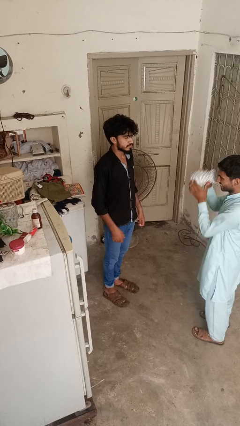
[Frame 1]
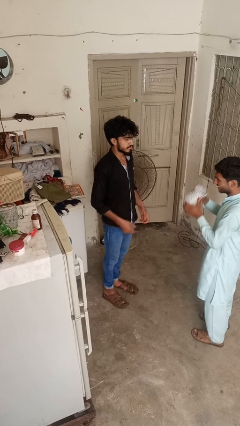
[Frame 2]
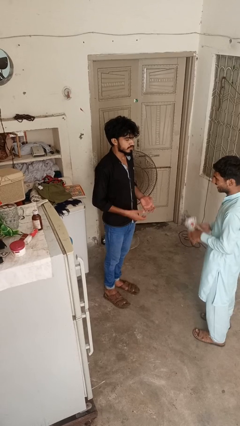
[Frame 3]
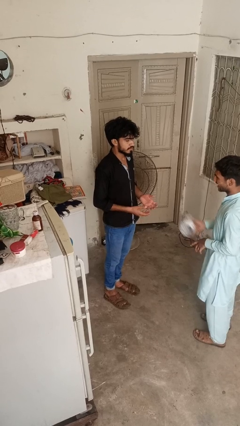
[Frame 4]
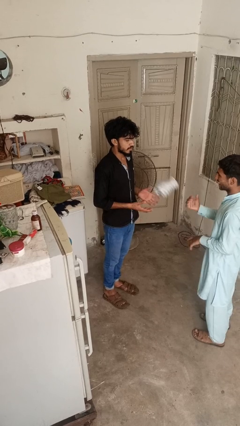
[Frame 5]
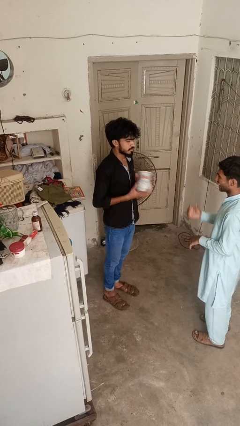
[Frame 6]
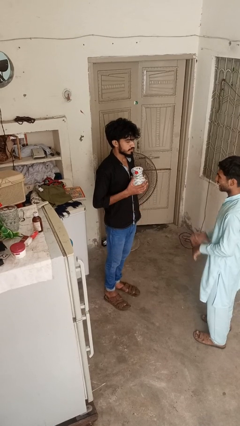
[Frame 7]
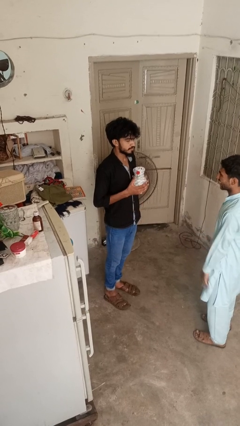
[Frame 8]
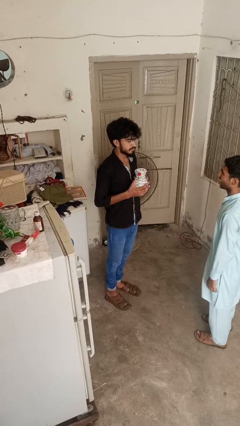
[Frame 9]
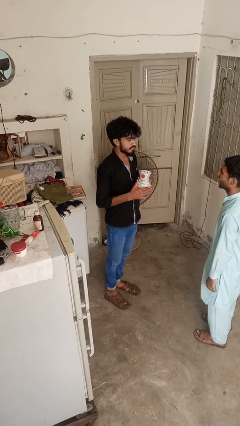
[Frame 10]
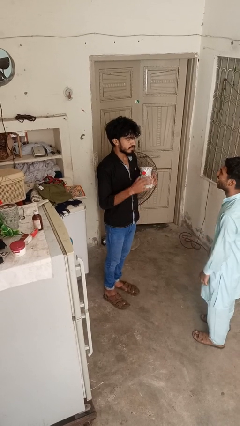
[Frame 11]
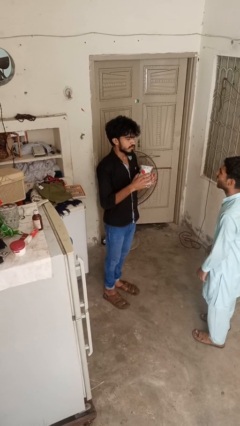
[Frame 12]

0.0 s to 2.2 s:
person catches object from person

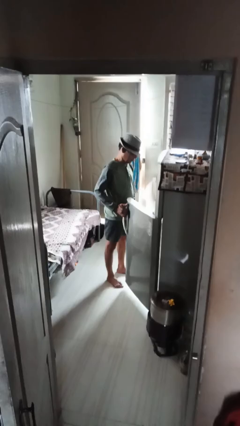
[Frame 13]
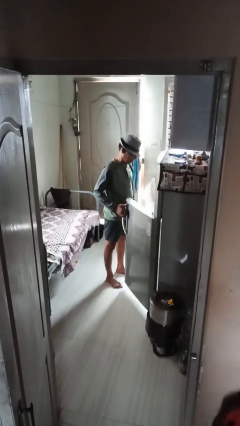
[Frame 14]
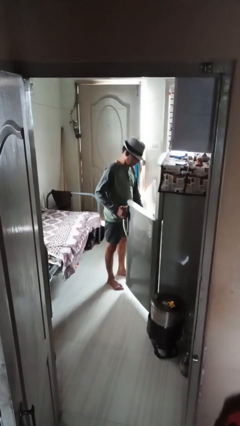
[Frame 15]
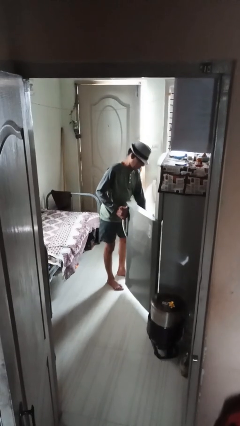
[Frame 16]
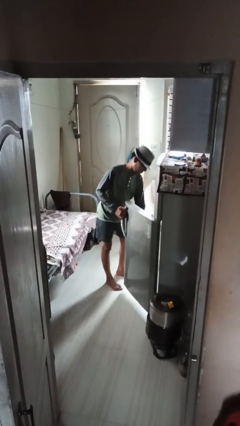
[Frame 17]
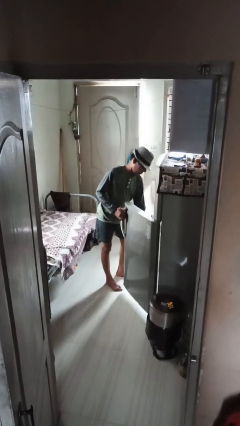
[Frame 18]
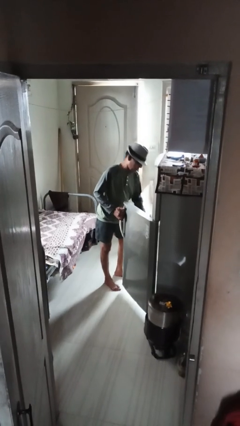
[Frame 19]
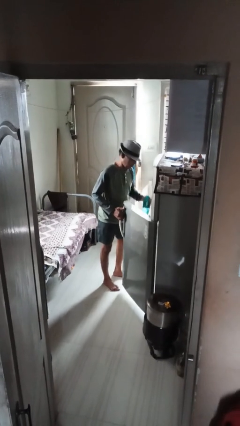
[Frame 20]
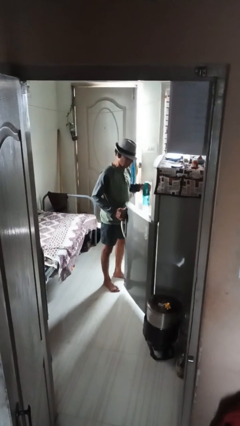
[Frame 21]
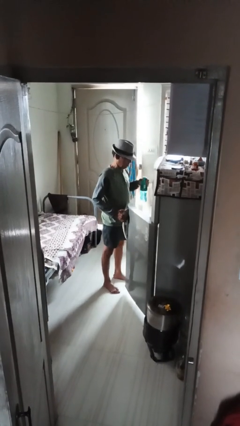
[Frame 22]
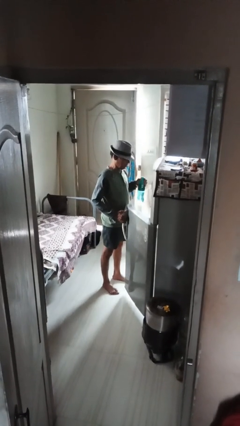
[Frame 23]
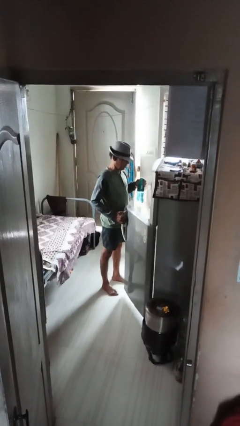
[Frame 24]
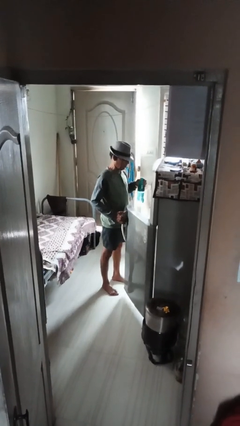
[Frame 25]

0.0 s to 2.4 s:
person takes object from refrigerator

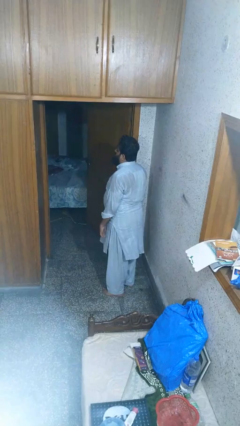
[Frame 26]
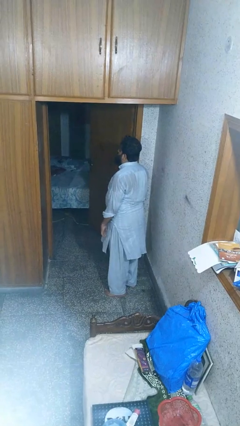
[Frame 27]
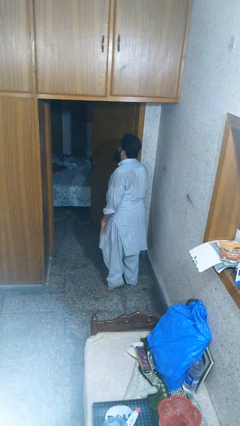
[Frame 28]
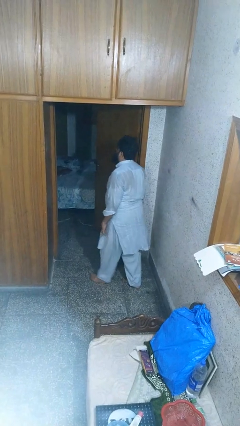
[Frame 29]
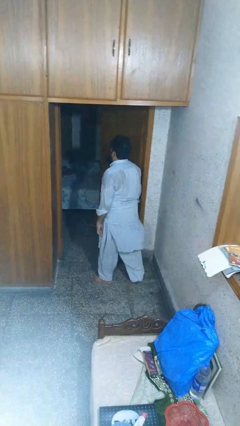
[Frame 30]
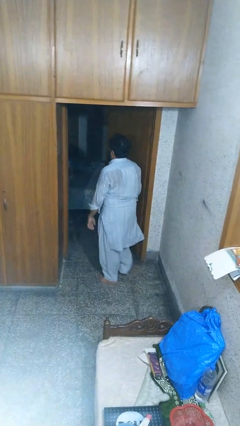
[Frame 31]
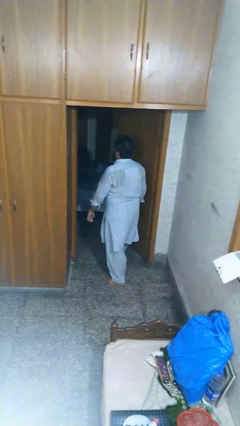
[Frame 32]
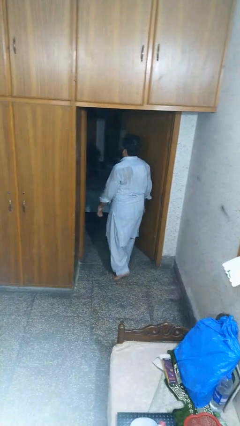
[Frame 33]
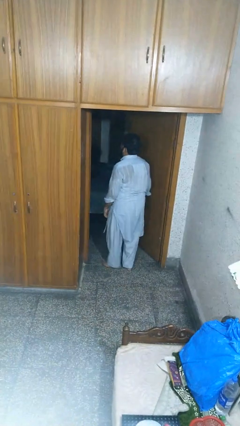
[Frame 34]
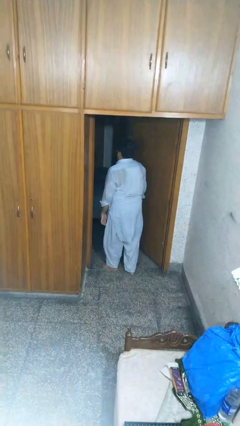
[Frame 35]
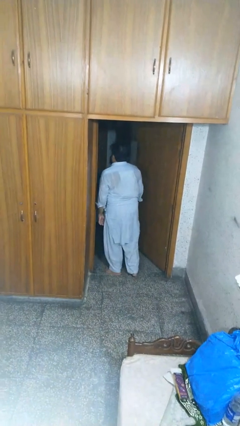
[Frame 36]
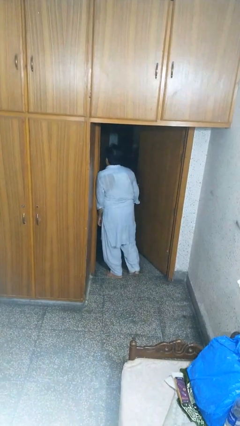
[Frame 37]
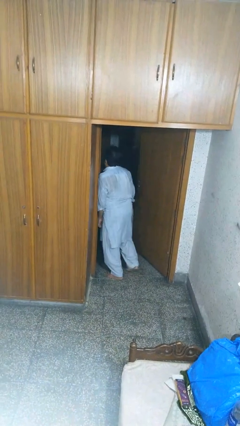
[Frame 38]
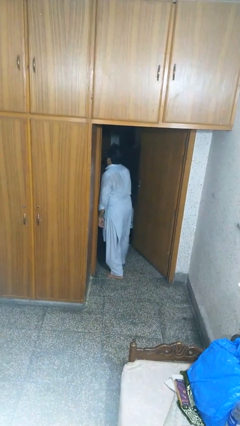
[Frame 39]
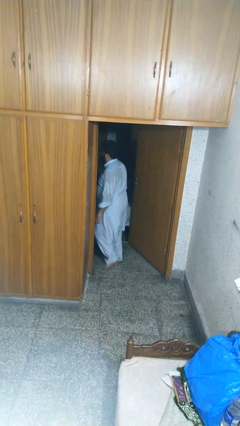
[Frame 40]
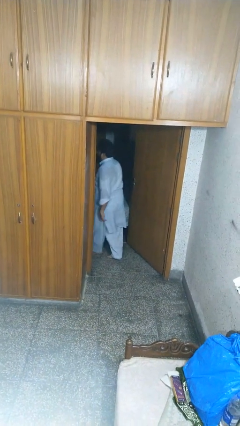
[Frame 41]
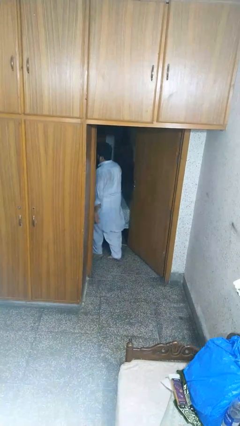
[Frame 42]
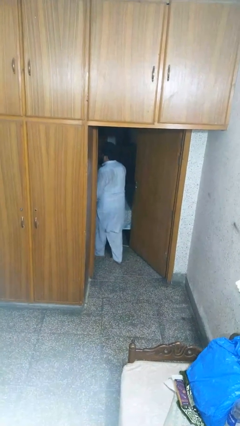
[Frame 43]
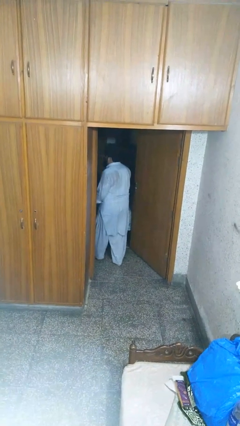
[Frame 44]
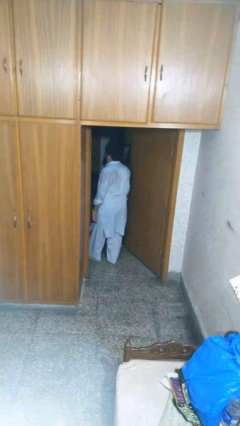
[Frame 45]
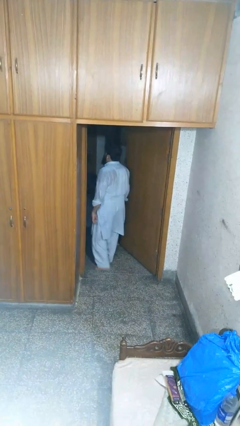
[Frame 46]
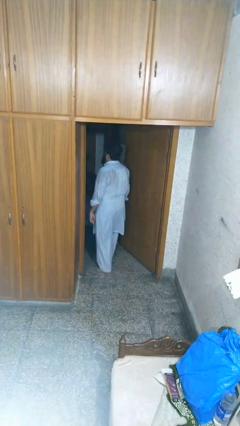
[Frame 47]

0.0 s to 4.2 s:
person bumps into wall

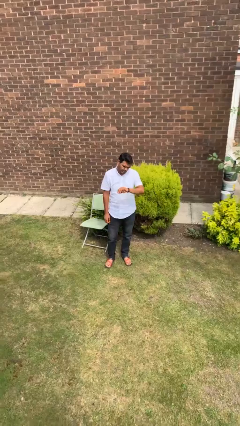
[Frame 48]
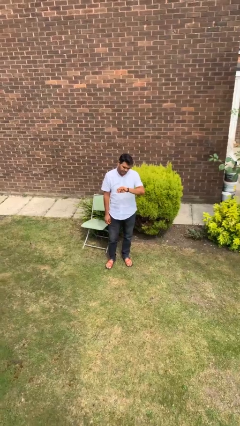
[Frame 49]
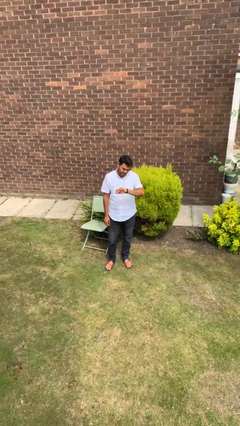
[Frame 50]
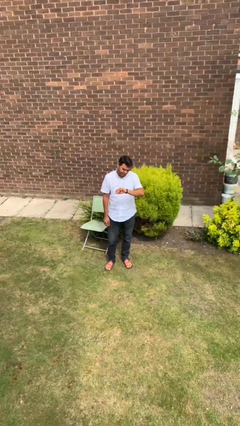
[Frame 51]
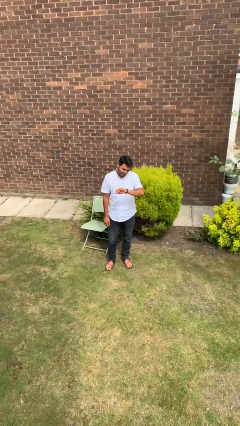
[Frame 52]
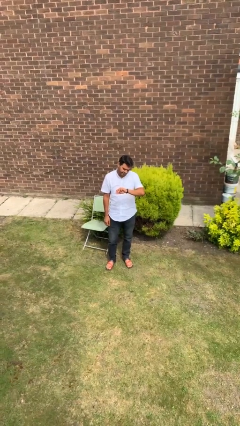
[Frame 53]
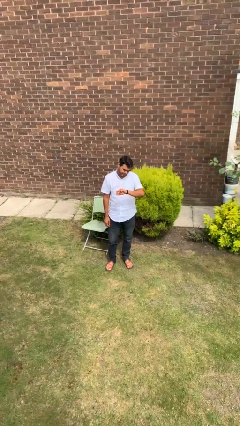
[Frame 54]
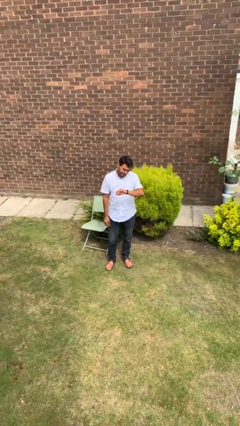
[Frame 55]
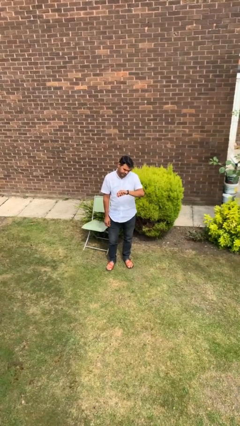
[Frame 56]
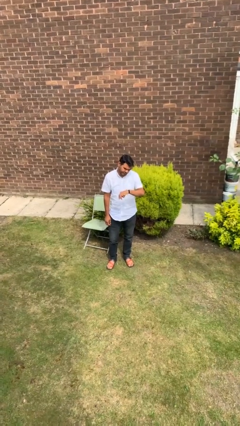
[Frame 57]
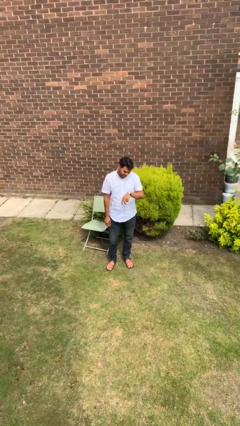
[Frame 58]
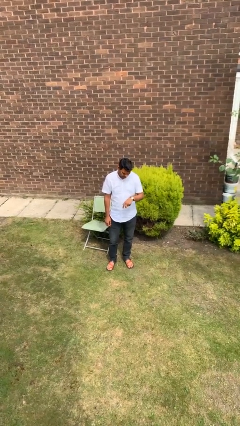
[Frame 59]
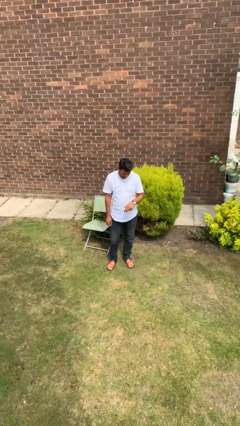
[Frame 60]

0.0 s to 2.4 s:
person looks at wristwatch

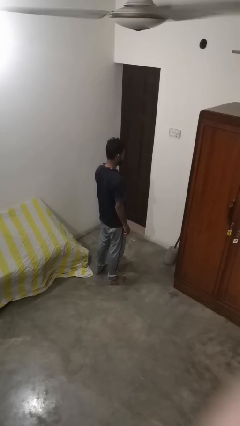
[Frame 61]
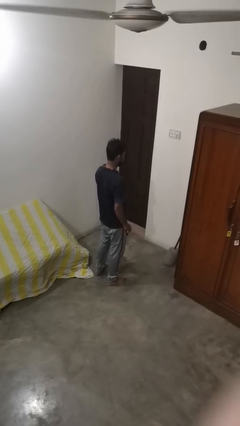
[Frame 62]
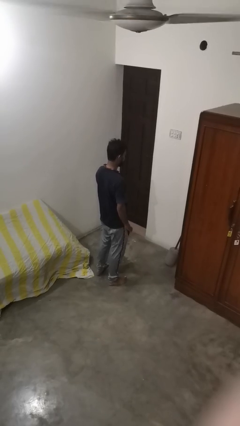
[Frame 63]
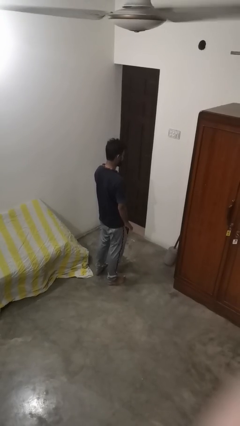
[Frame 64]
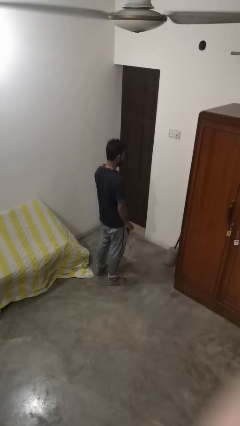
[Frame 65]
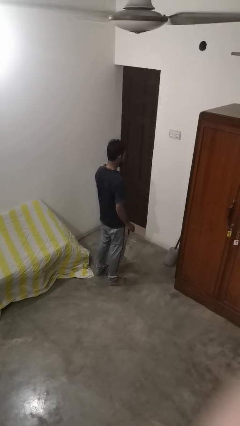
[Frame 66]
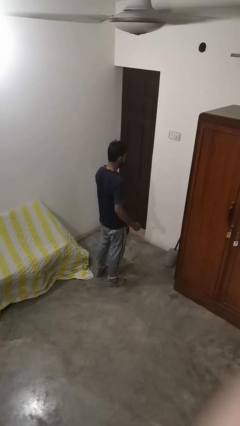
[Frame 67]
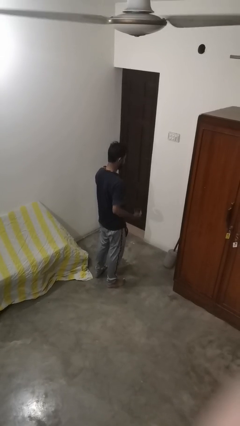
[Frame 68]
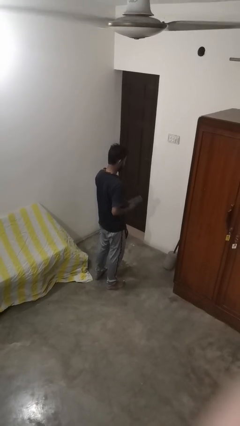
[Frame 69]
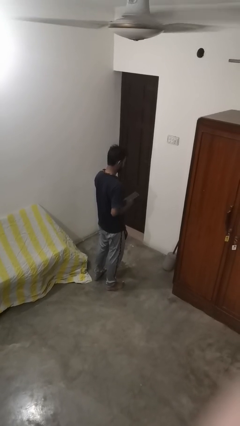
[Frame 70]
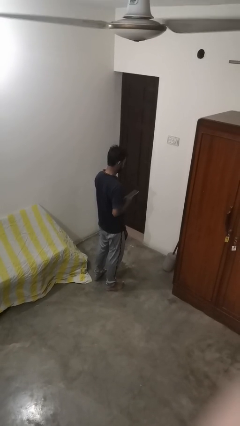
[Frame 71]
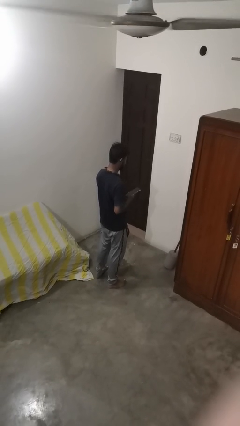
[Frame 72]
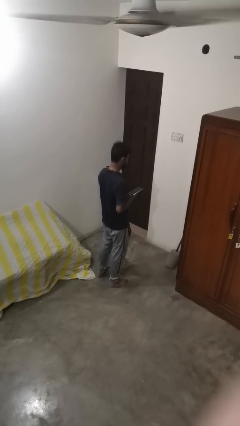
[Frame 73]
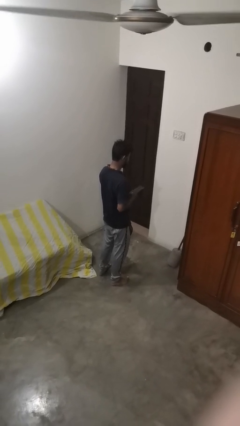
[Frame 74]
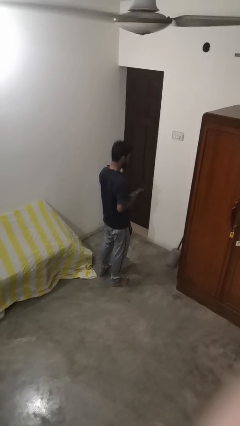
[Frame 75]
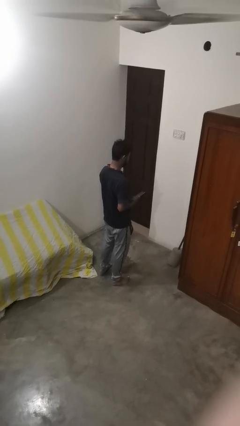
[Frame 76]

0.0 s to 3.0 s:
person takes phone from pocket

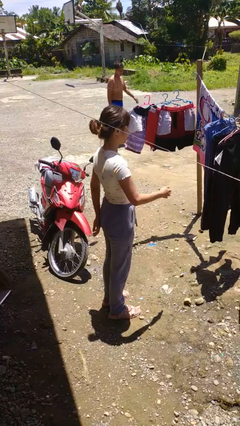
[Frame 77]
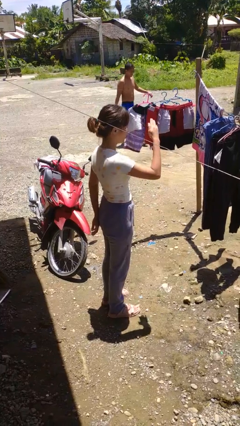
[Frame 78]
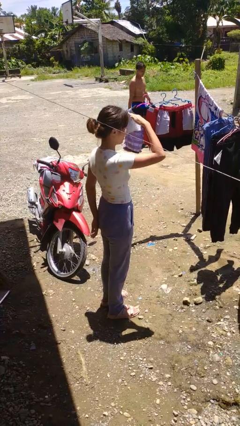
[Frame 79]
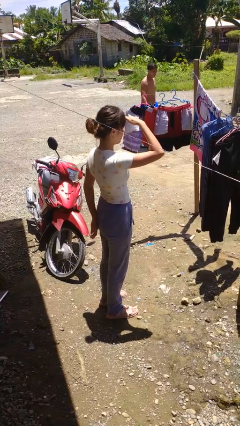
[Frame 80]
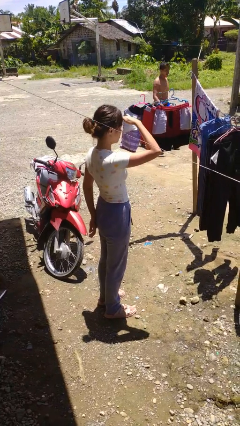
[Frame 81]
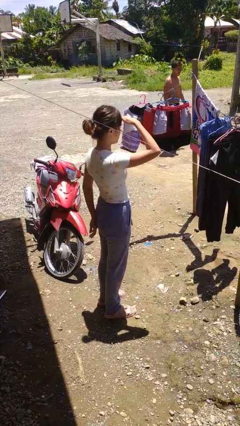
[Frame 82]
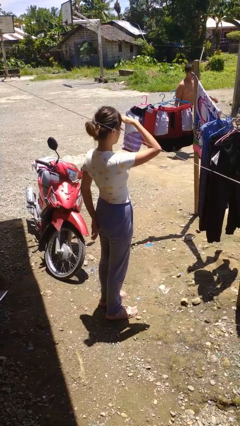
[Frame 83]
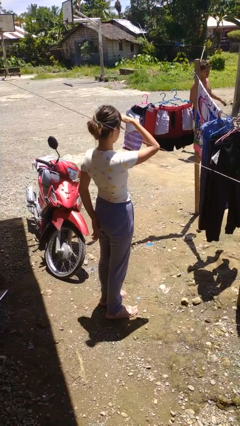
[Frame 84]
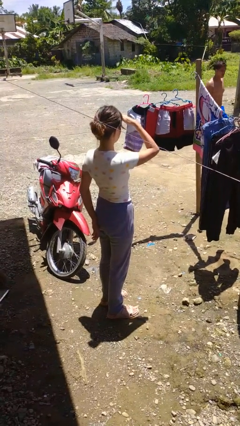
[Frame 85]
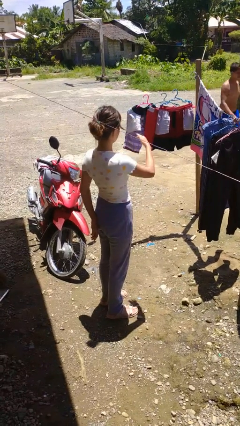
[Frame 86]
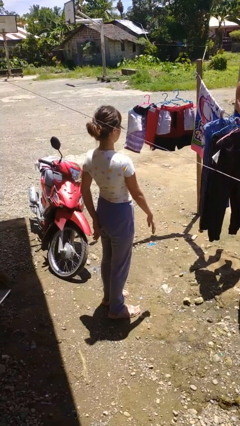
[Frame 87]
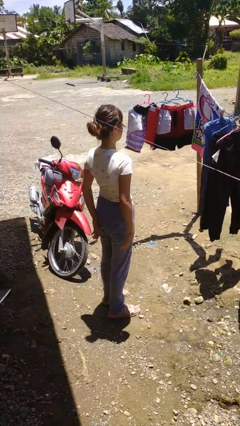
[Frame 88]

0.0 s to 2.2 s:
person shades eyes

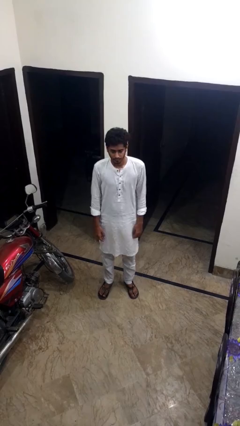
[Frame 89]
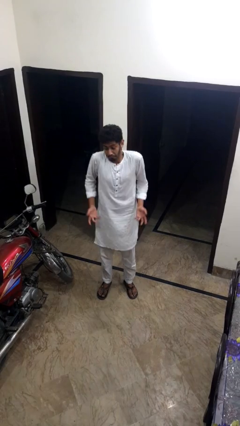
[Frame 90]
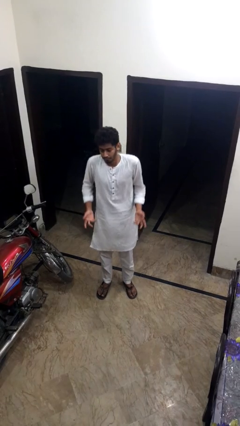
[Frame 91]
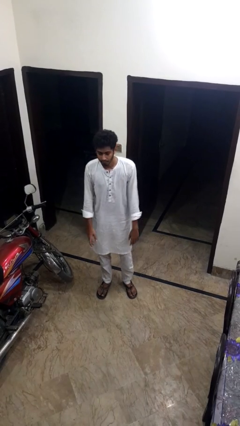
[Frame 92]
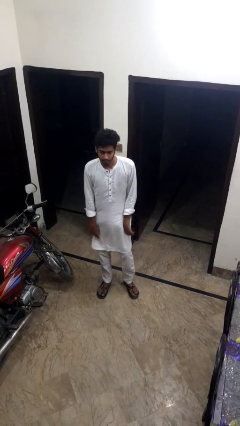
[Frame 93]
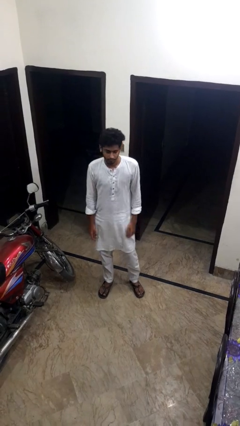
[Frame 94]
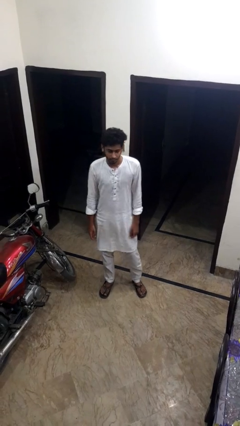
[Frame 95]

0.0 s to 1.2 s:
person shrugs
